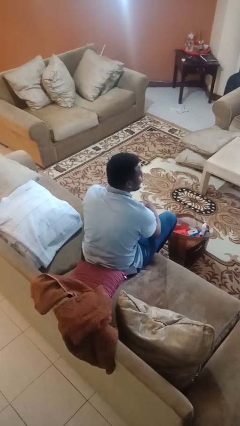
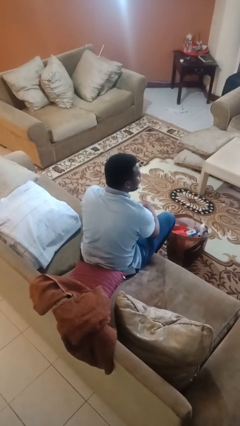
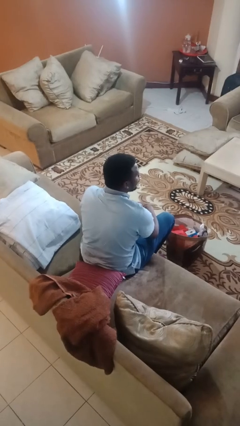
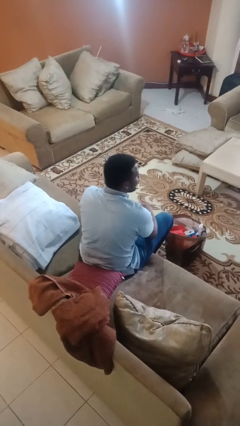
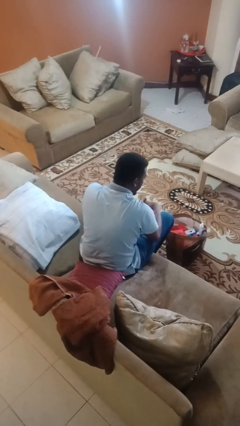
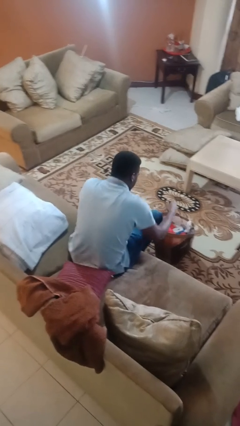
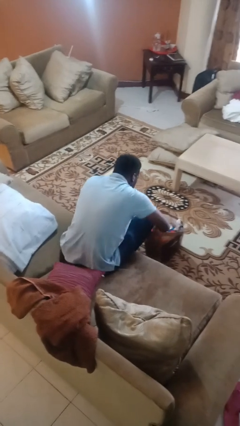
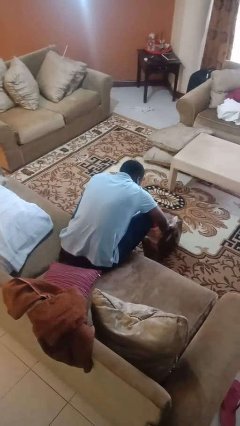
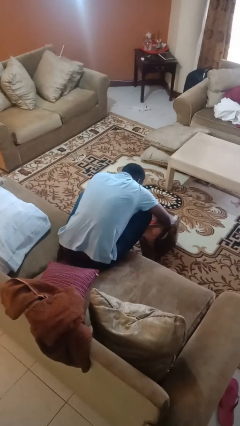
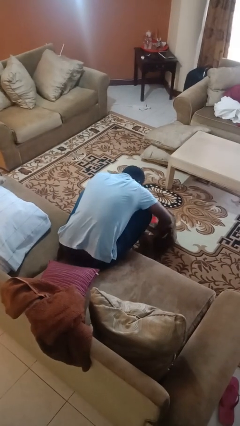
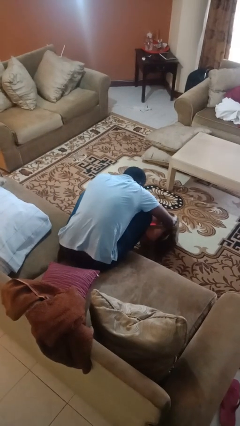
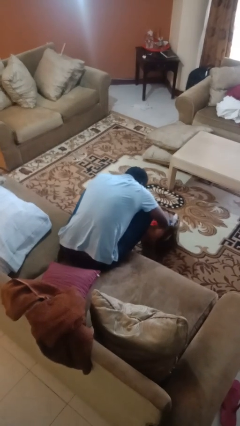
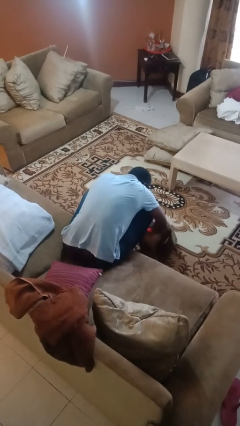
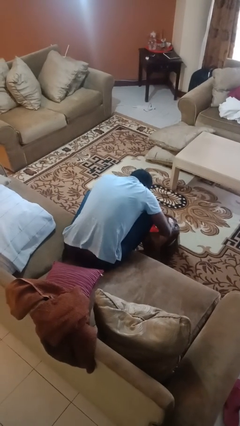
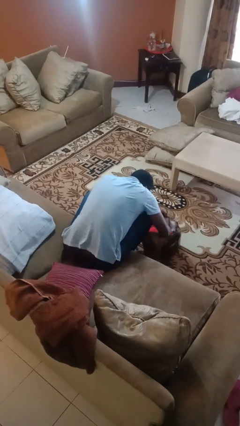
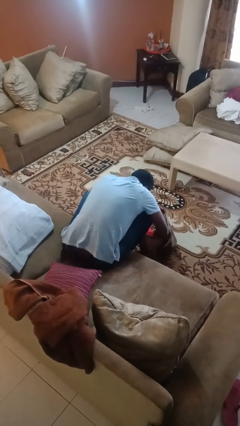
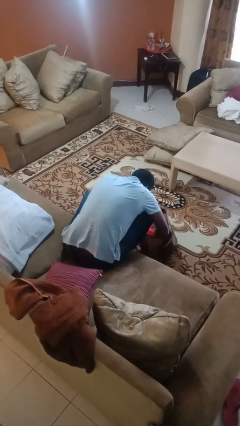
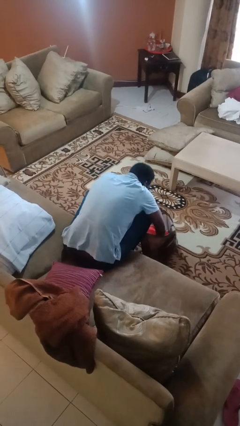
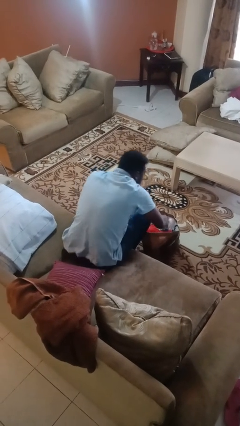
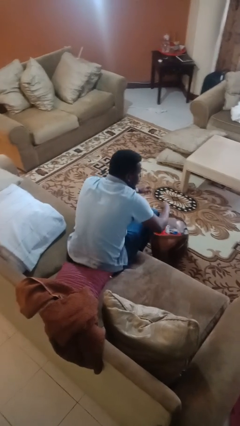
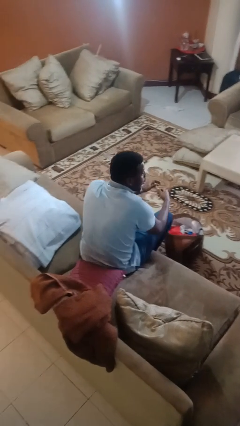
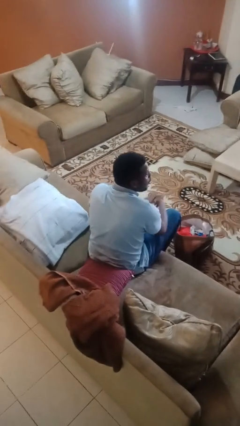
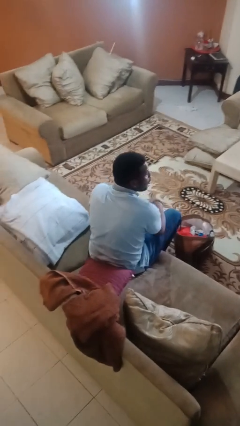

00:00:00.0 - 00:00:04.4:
person searches in bag

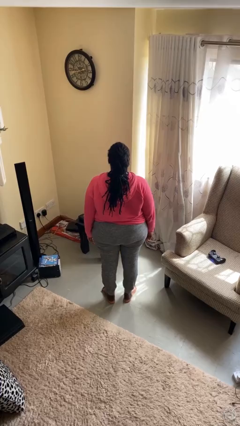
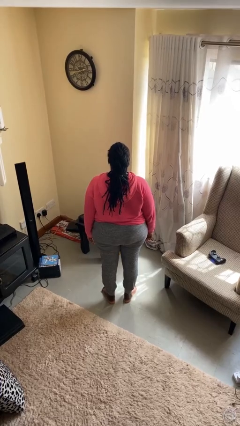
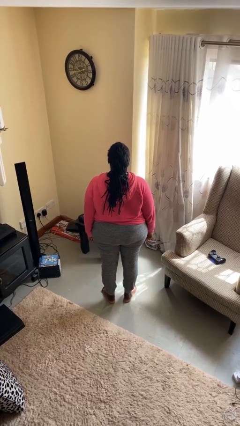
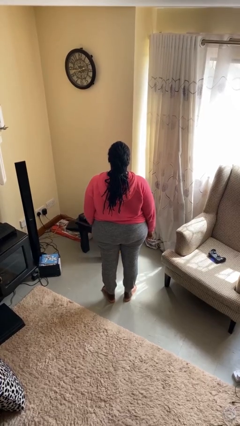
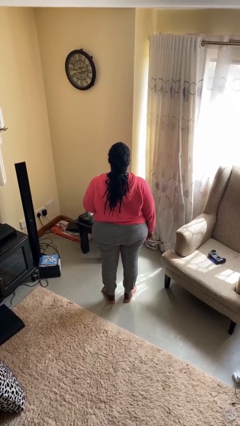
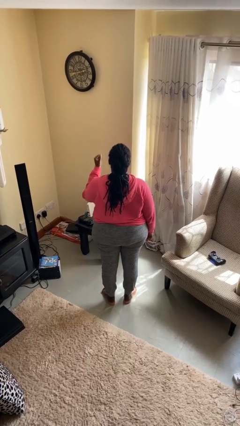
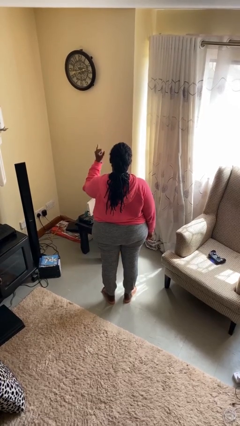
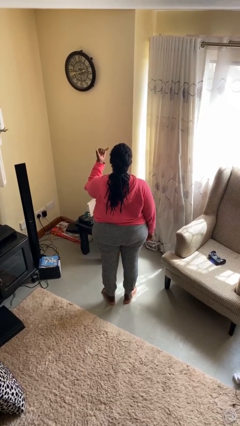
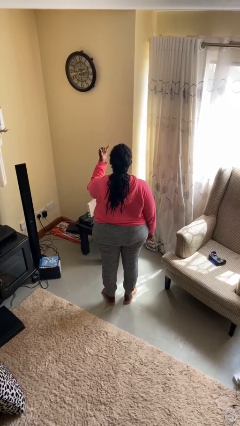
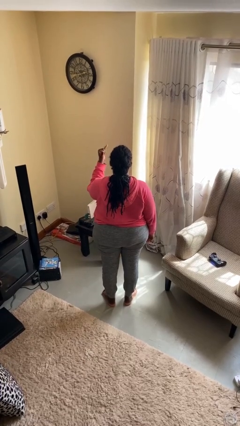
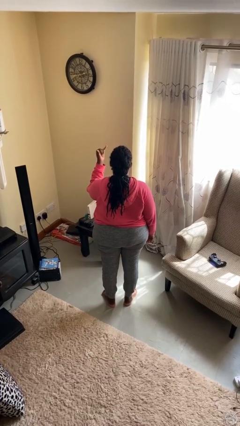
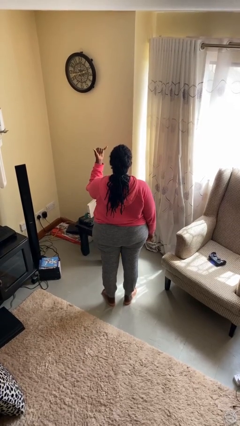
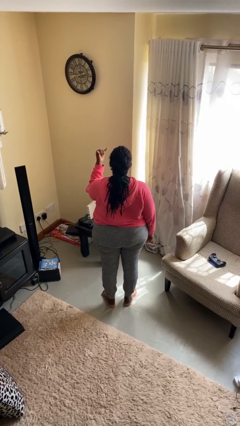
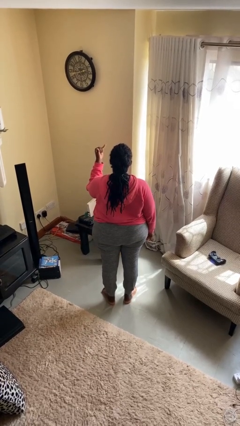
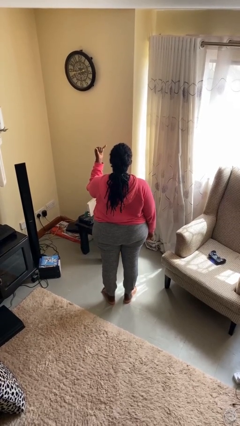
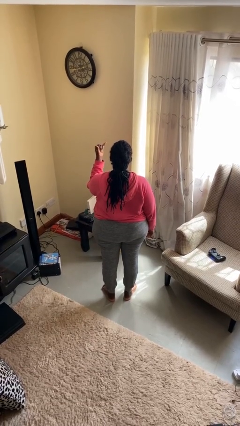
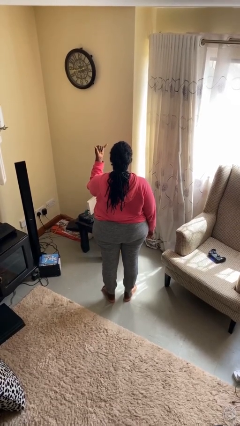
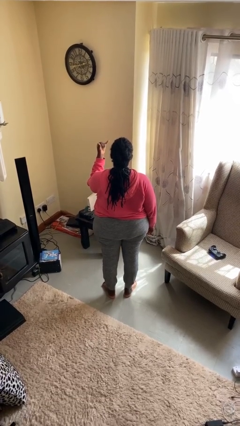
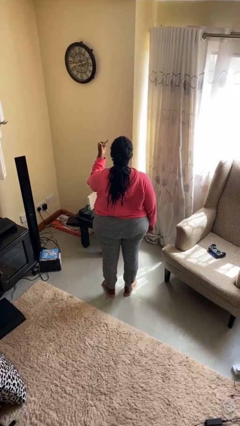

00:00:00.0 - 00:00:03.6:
person gestures hang loose

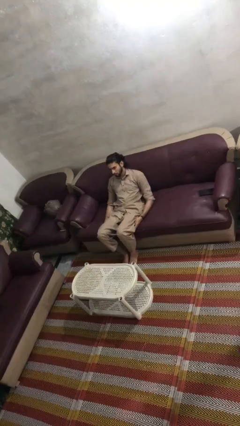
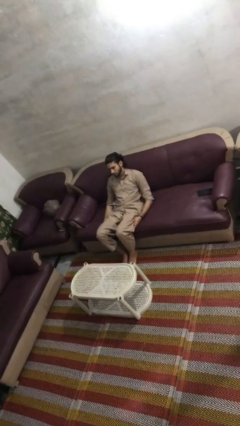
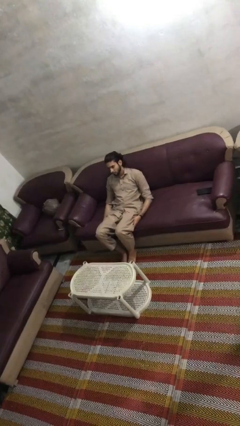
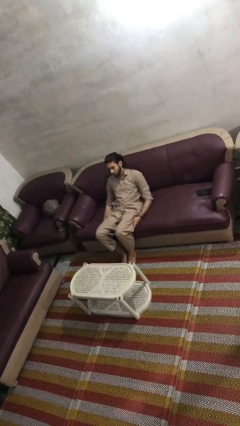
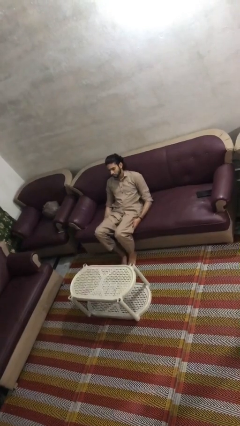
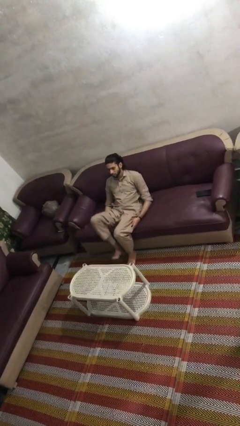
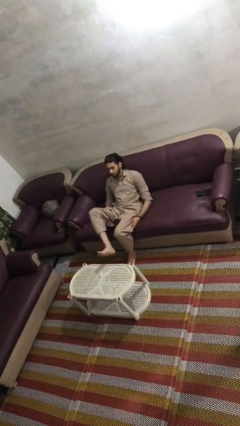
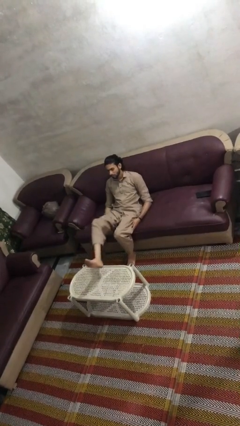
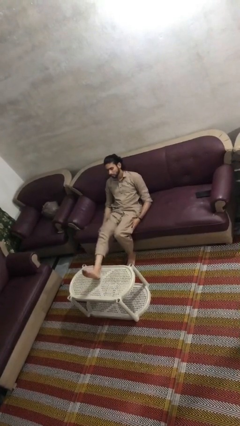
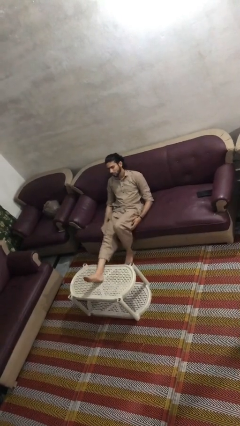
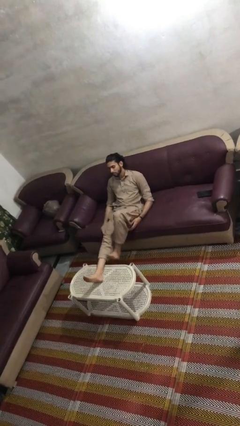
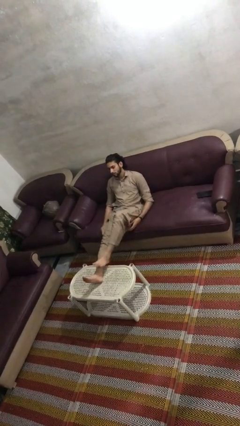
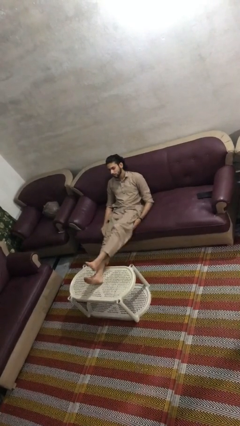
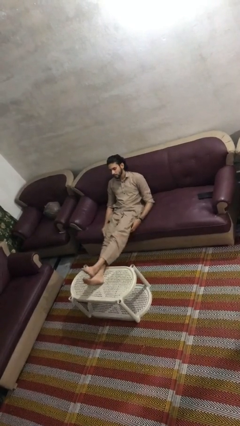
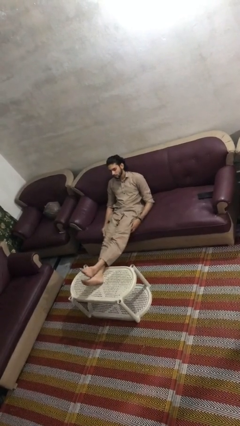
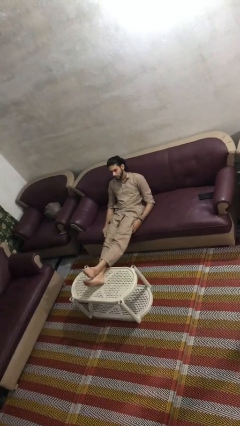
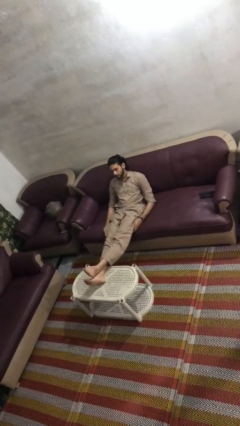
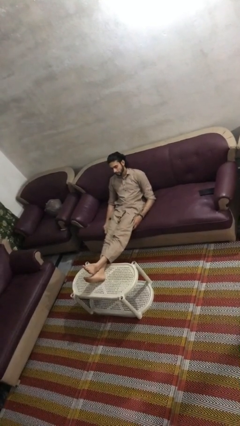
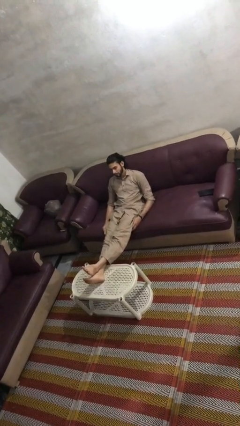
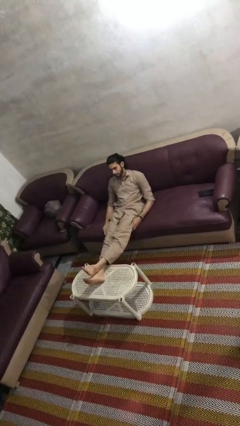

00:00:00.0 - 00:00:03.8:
person puts feet up

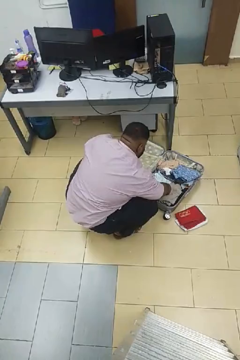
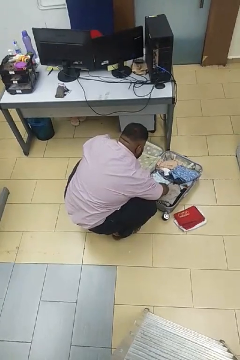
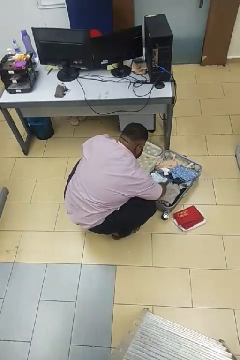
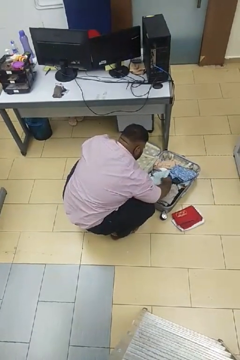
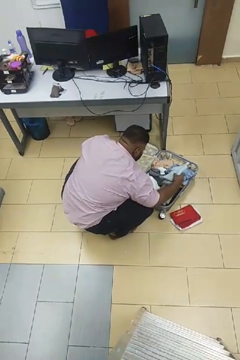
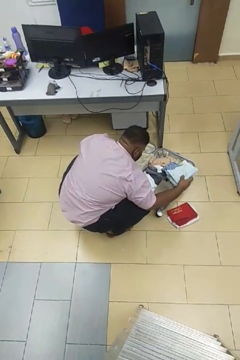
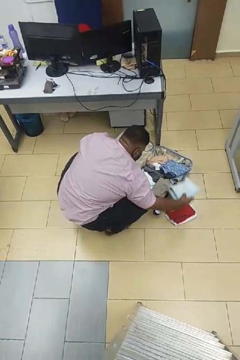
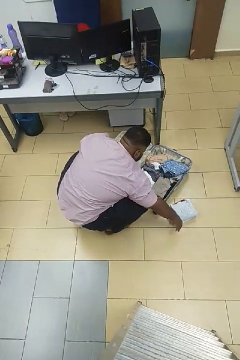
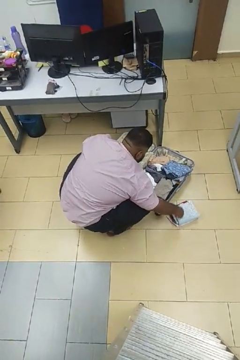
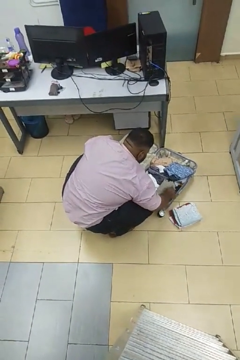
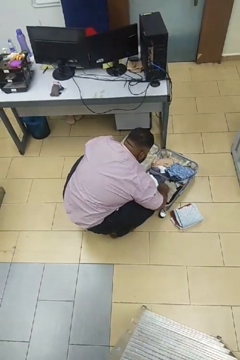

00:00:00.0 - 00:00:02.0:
person unloads clothes from suitcase

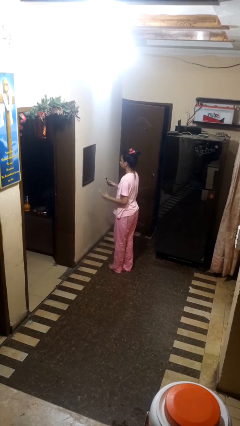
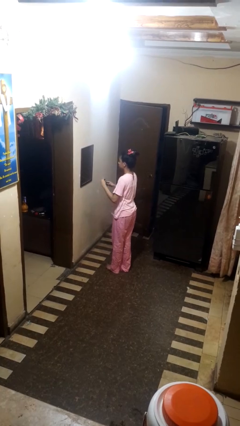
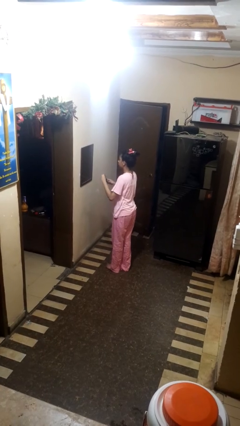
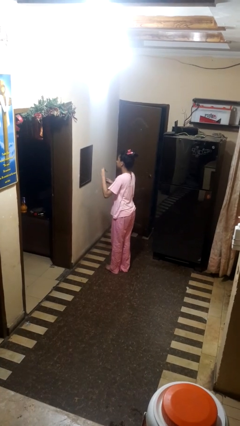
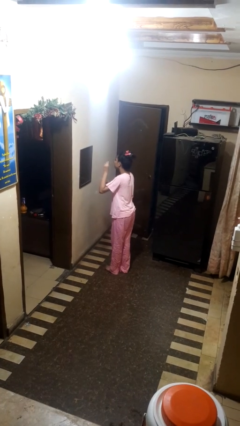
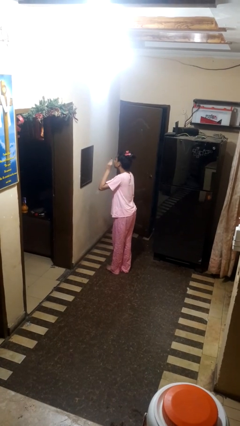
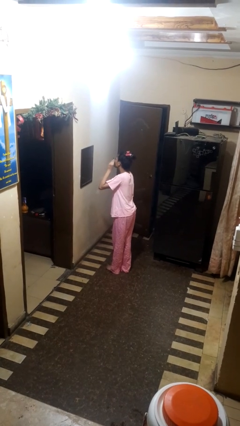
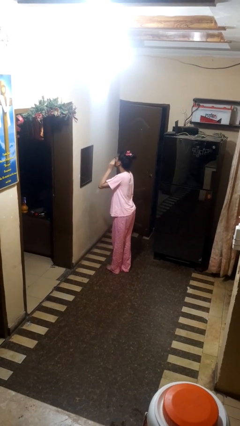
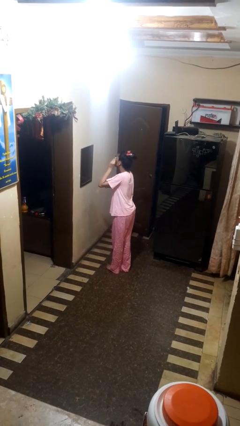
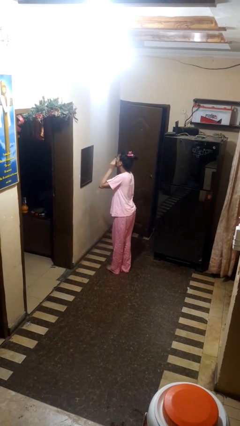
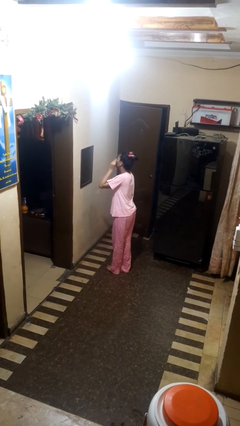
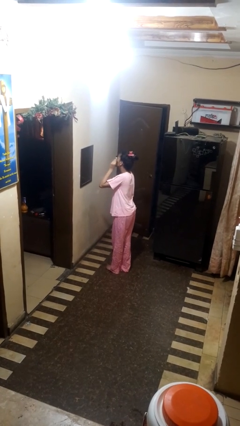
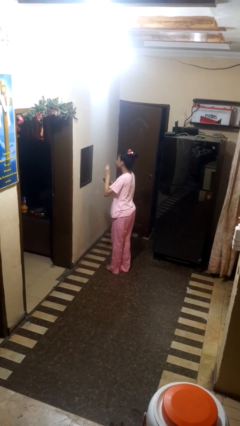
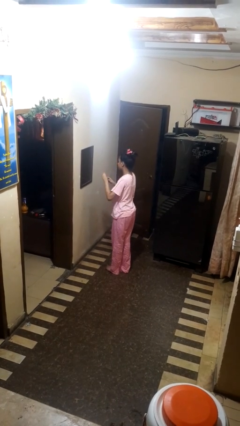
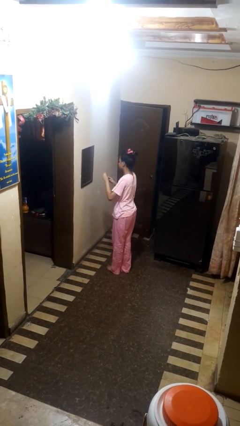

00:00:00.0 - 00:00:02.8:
person applies eye makeup

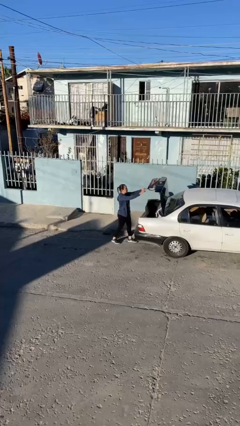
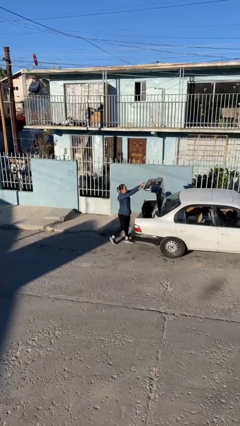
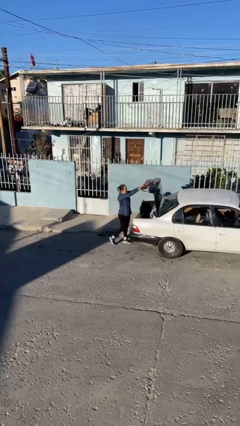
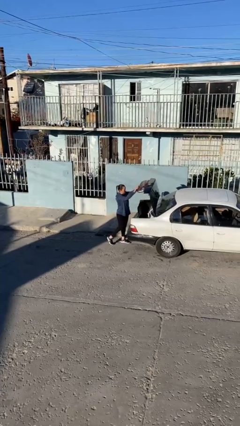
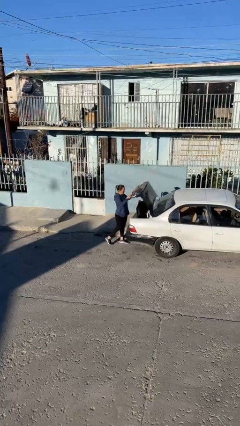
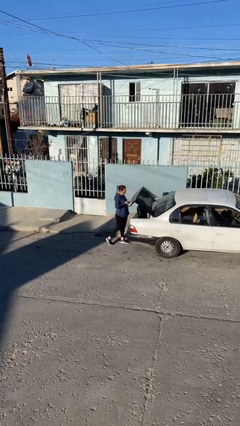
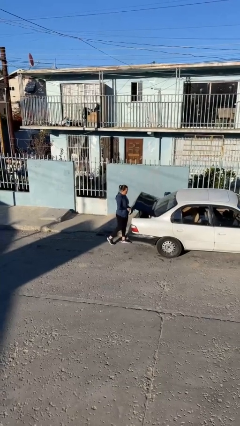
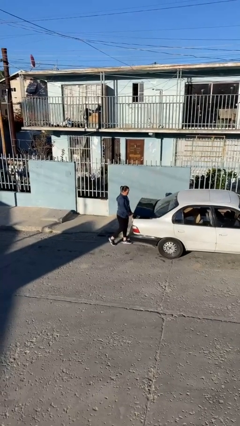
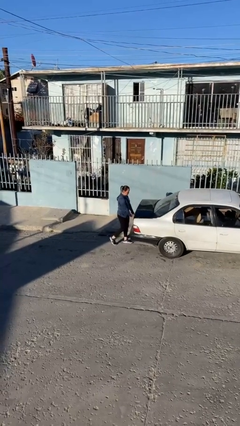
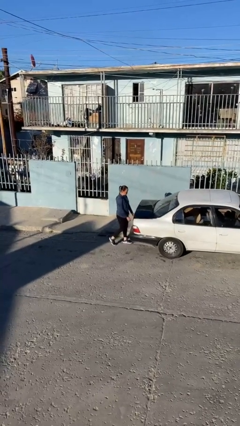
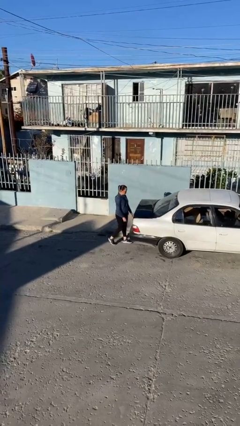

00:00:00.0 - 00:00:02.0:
person closes car trunk
